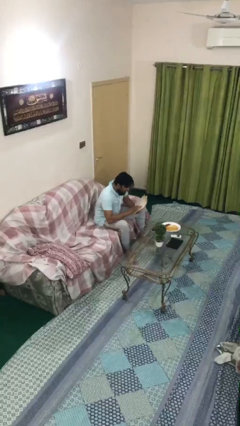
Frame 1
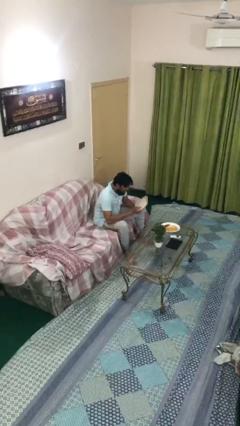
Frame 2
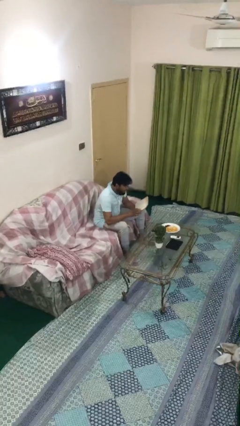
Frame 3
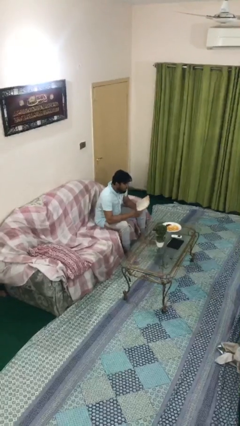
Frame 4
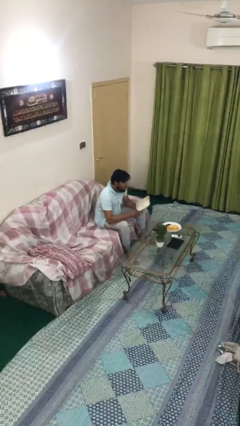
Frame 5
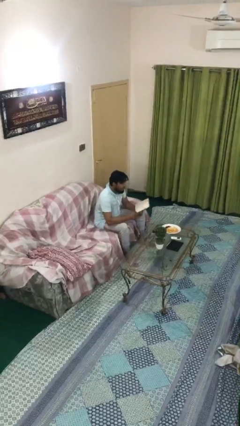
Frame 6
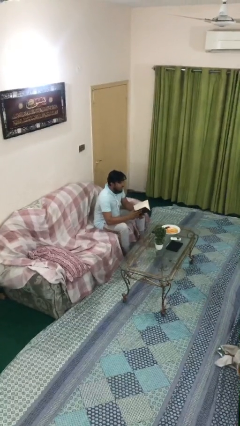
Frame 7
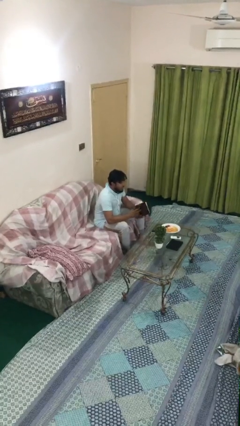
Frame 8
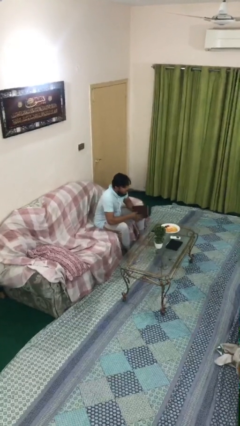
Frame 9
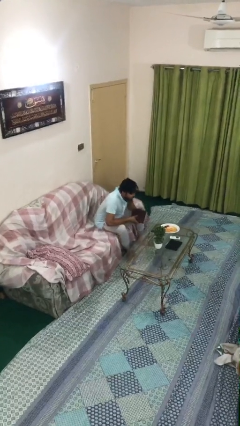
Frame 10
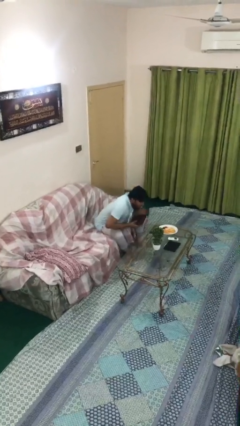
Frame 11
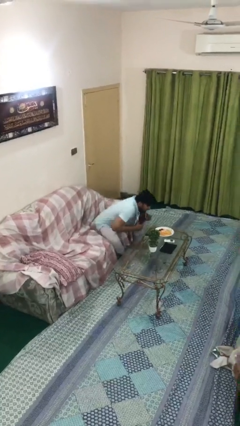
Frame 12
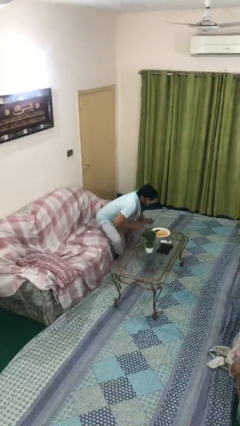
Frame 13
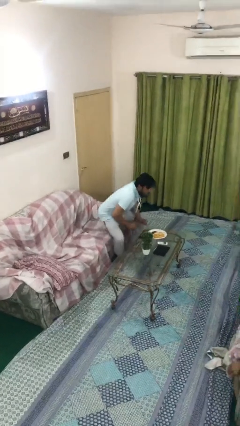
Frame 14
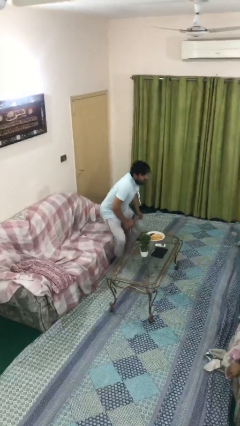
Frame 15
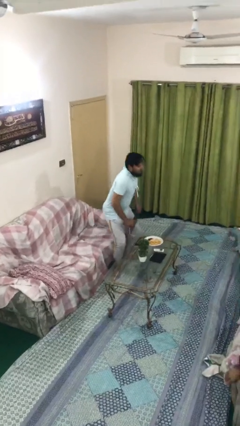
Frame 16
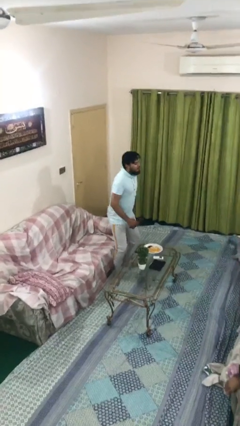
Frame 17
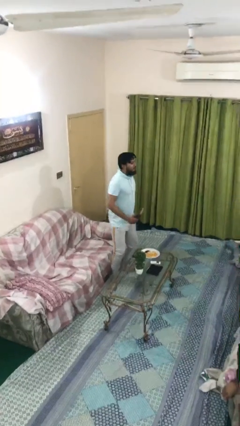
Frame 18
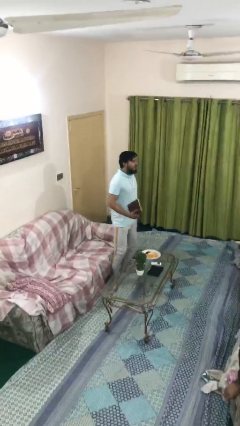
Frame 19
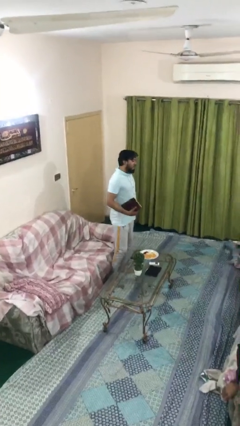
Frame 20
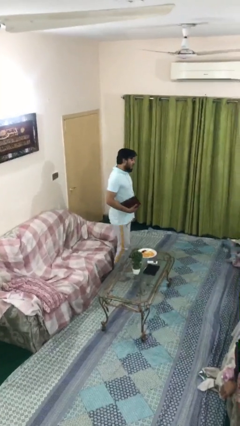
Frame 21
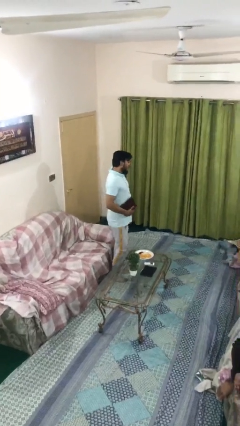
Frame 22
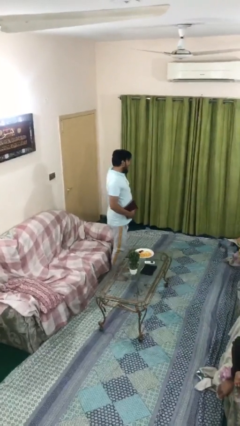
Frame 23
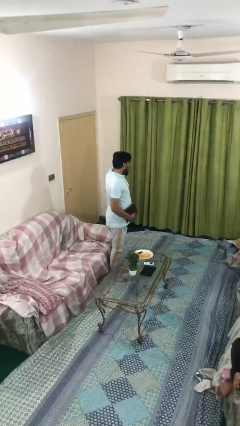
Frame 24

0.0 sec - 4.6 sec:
person stands up

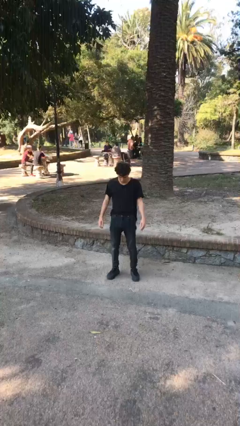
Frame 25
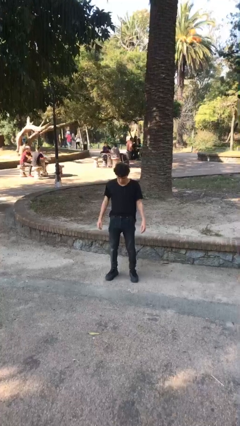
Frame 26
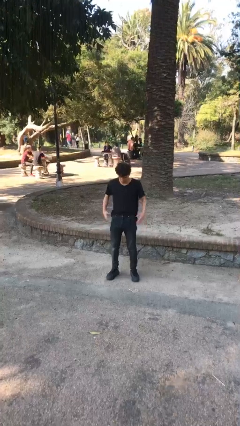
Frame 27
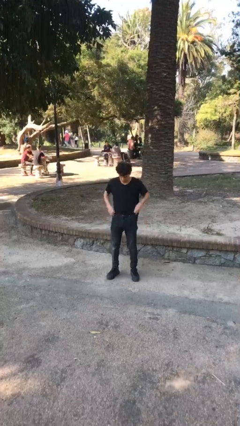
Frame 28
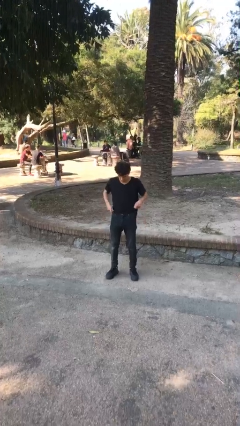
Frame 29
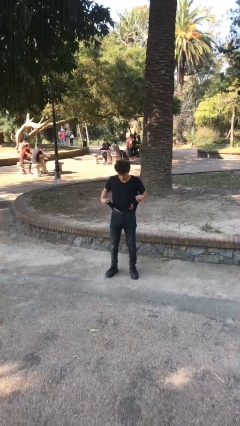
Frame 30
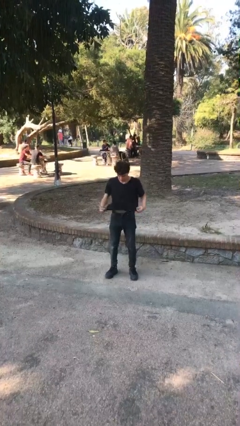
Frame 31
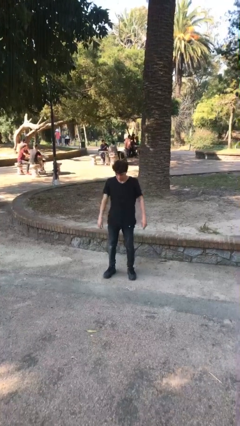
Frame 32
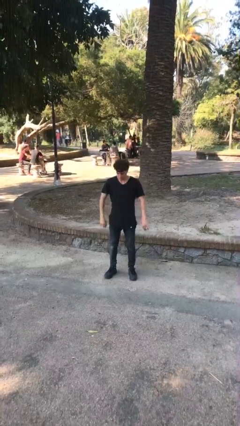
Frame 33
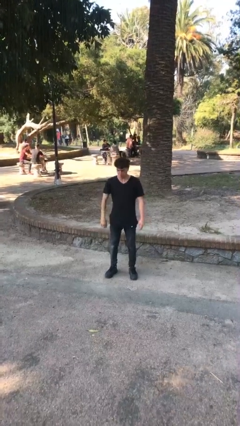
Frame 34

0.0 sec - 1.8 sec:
person untucks shirt

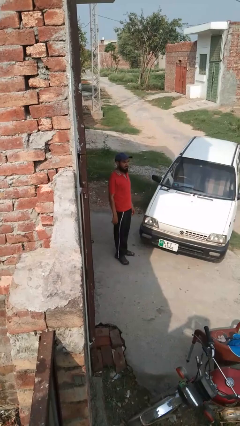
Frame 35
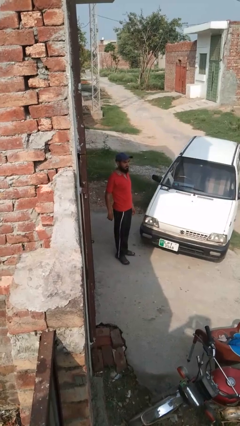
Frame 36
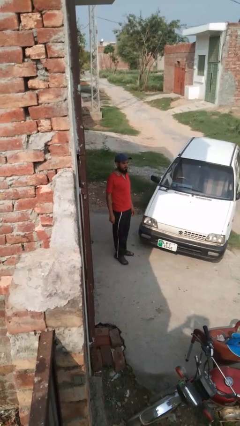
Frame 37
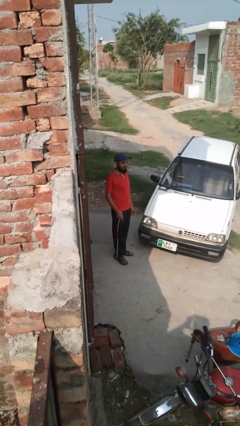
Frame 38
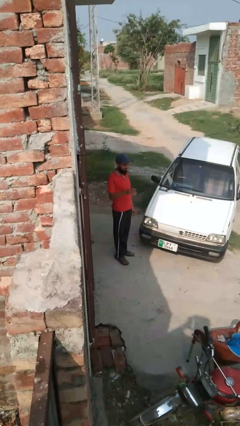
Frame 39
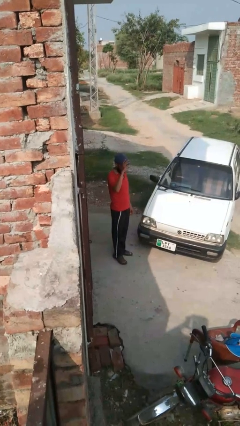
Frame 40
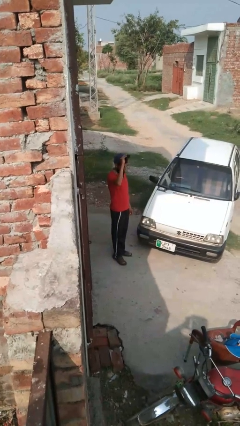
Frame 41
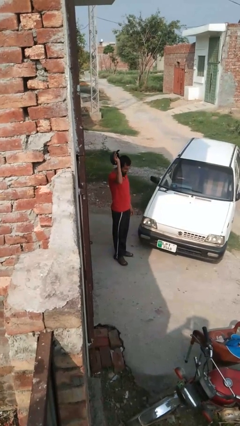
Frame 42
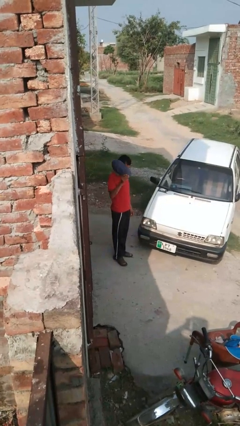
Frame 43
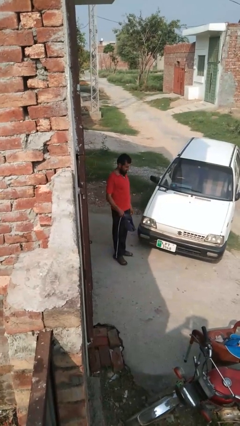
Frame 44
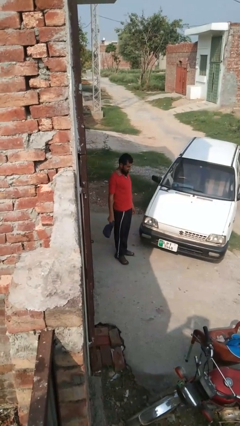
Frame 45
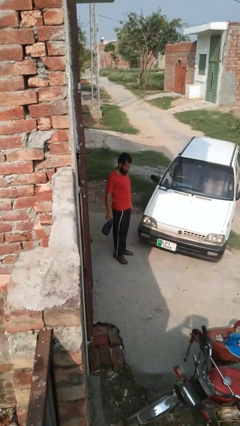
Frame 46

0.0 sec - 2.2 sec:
person takes off hat

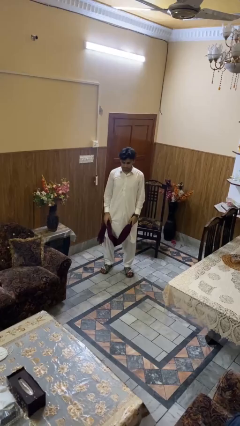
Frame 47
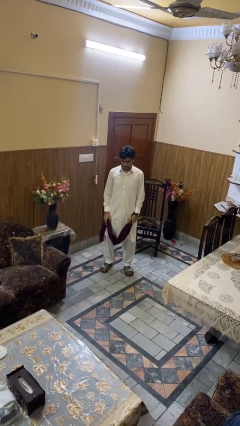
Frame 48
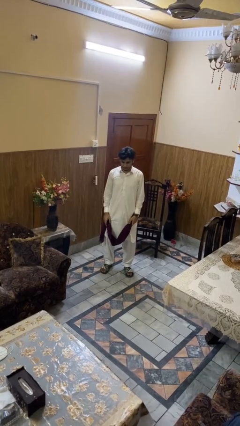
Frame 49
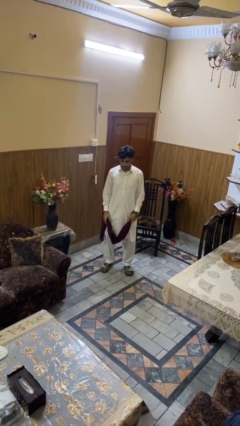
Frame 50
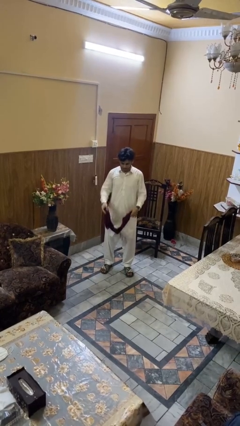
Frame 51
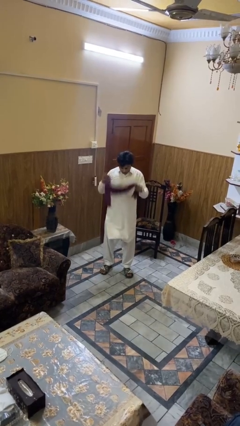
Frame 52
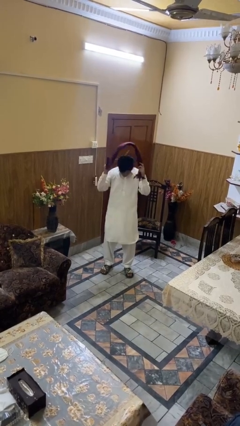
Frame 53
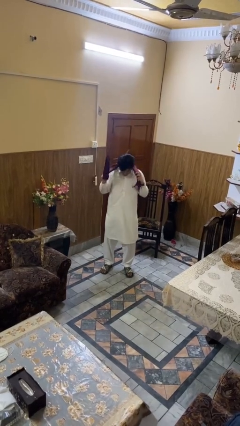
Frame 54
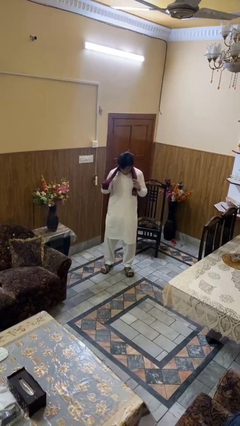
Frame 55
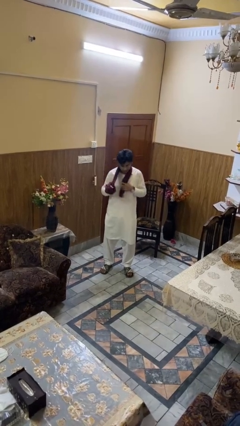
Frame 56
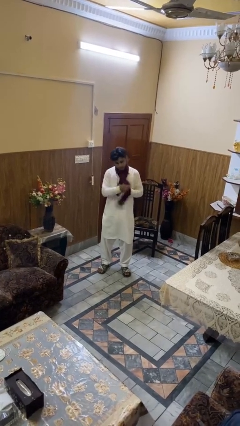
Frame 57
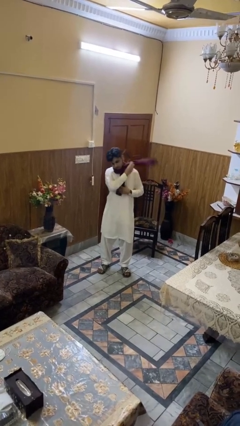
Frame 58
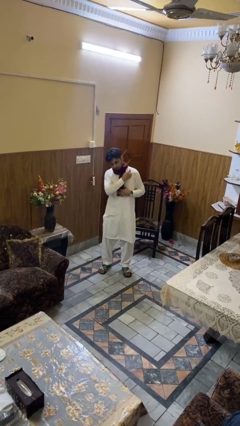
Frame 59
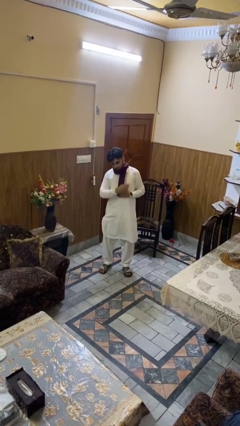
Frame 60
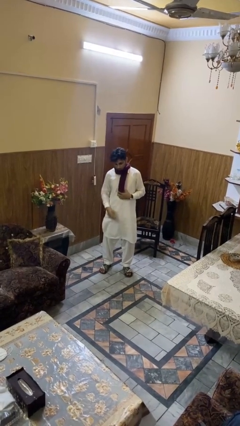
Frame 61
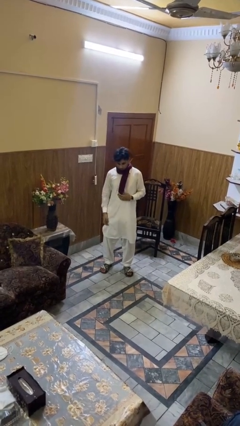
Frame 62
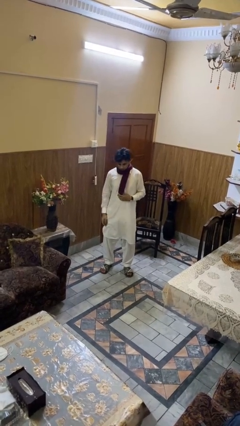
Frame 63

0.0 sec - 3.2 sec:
person puts on scarf

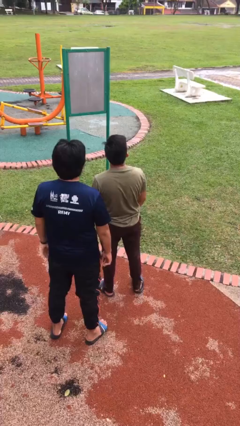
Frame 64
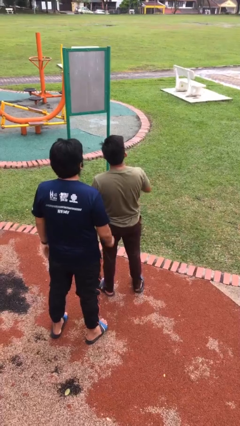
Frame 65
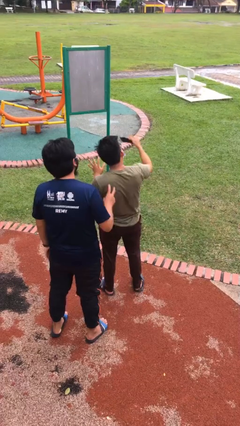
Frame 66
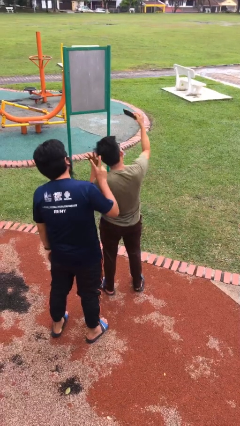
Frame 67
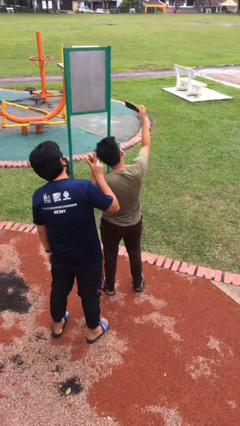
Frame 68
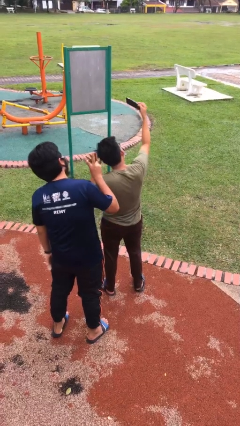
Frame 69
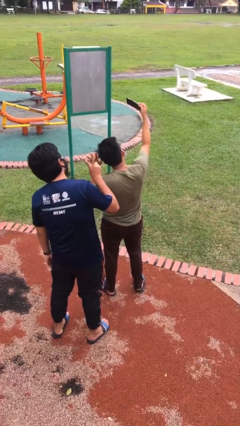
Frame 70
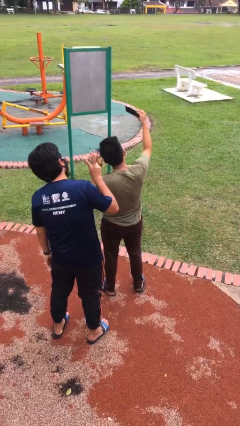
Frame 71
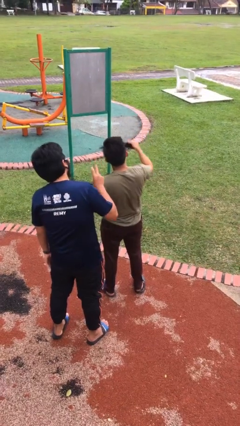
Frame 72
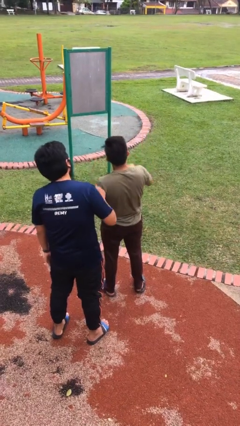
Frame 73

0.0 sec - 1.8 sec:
person takes selfie with person

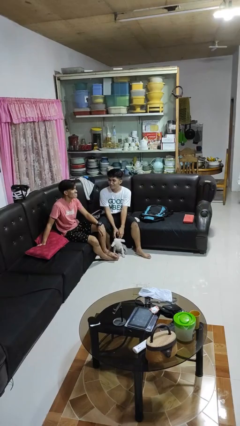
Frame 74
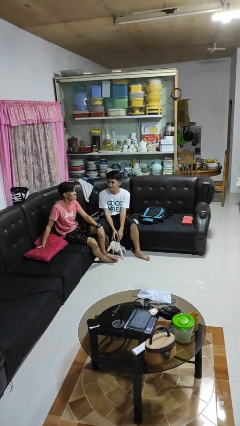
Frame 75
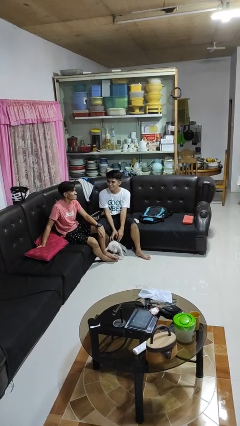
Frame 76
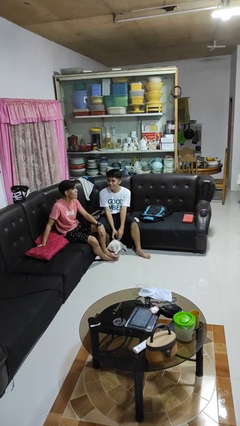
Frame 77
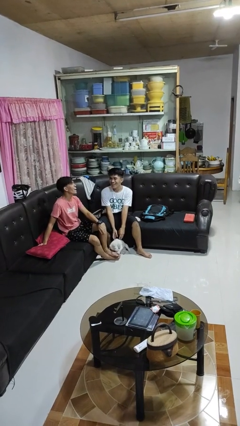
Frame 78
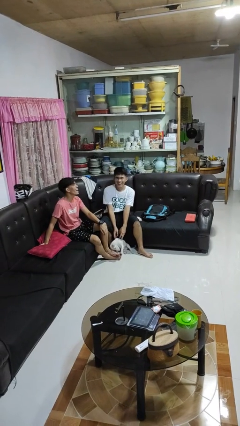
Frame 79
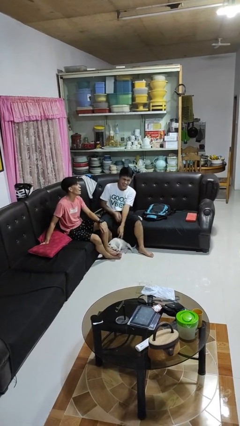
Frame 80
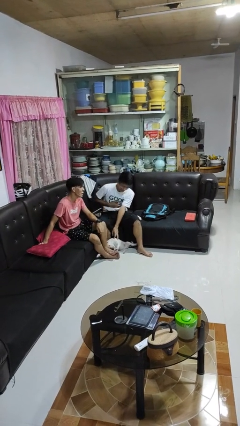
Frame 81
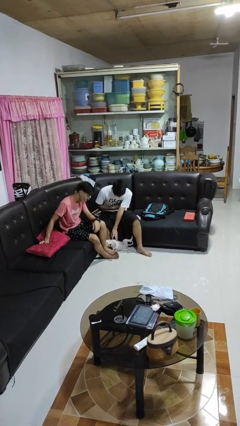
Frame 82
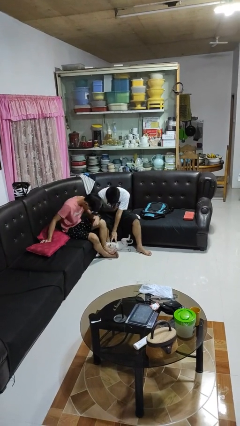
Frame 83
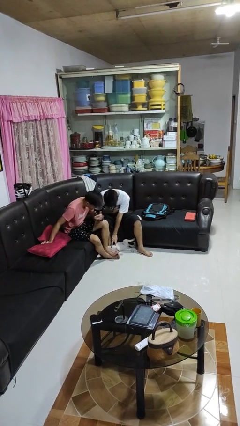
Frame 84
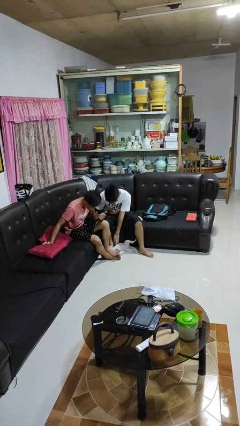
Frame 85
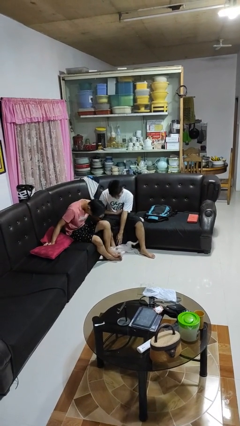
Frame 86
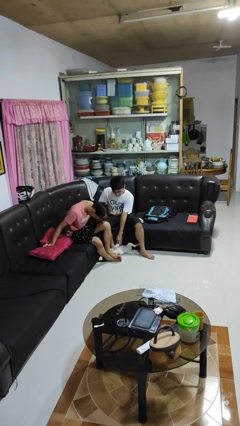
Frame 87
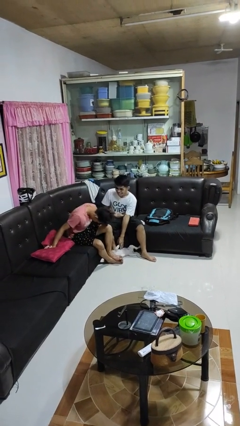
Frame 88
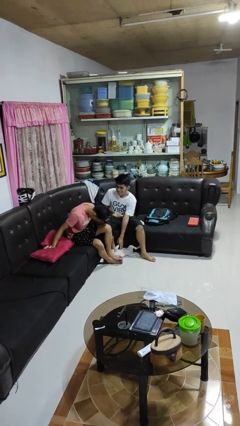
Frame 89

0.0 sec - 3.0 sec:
person laughs with person

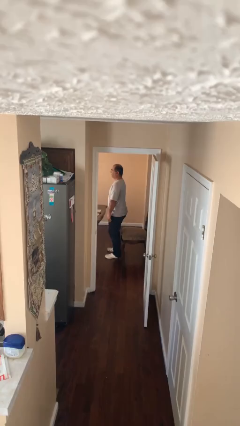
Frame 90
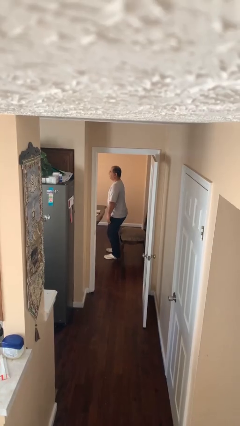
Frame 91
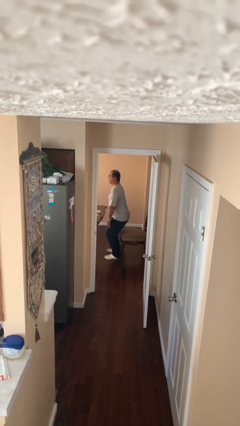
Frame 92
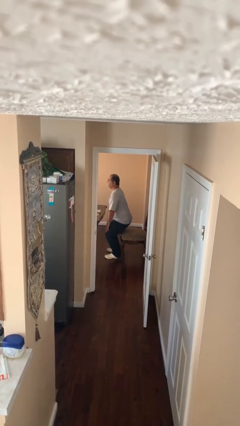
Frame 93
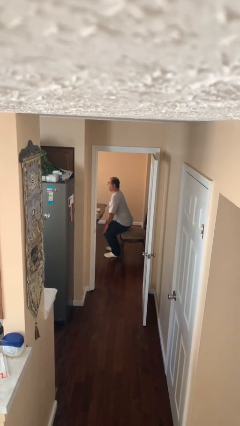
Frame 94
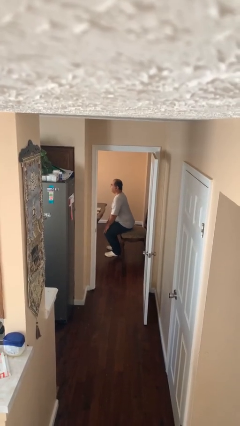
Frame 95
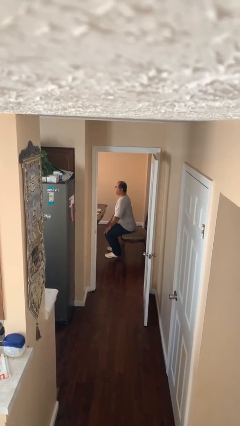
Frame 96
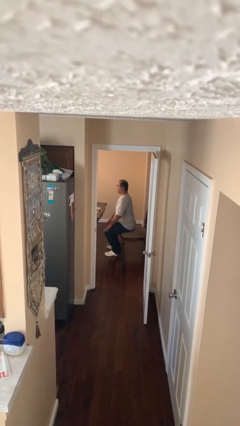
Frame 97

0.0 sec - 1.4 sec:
person sits down
